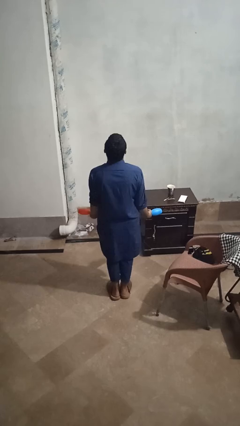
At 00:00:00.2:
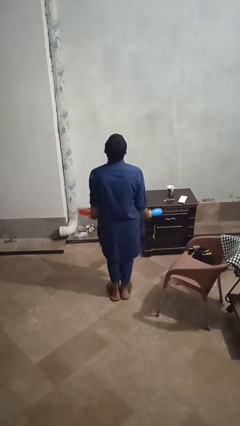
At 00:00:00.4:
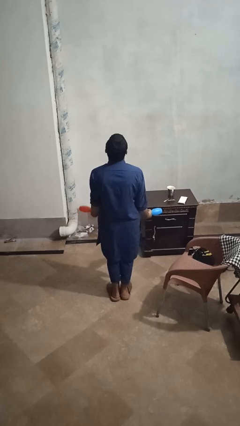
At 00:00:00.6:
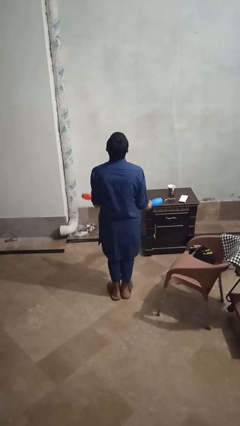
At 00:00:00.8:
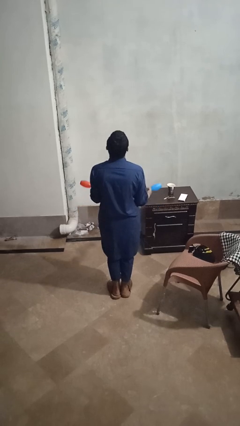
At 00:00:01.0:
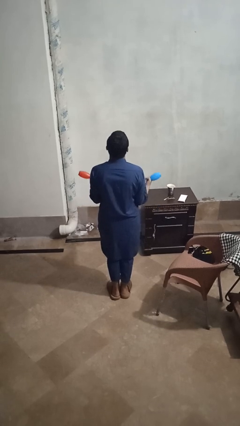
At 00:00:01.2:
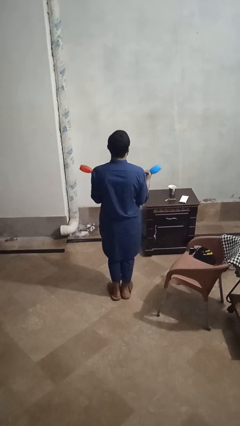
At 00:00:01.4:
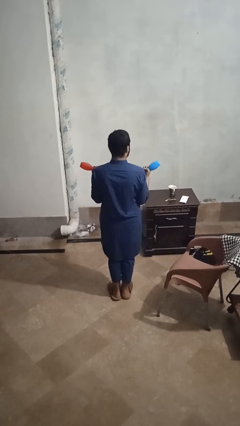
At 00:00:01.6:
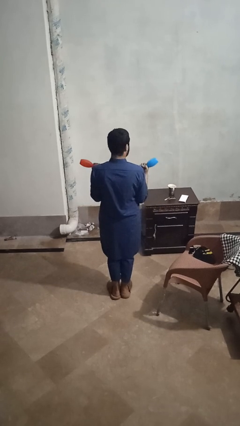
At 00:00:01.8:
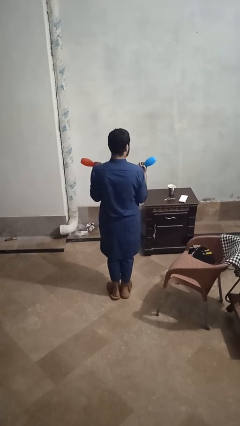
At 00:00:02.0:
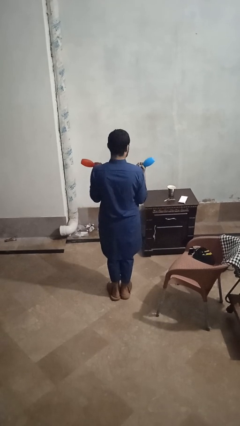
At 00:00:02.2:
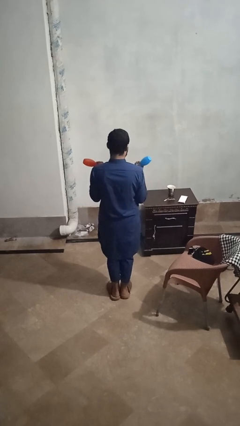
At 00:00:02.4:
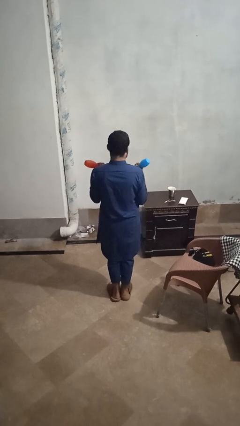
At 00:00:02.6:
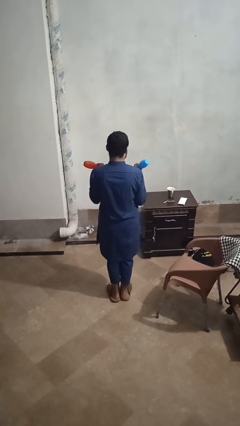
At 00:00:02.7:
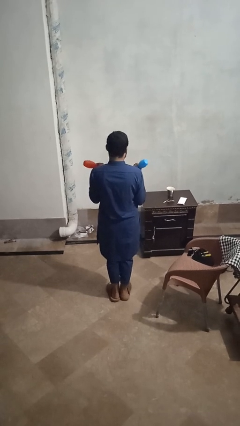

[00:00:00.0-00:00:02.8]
person lifts dumbbells

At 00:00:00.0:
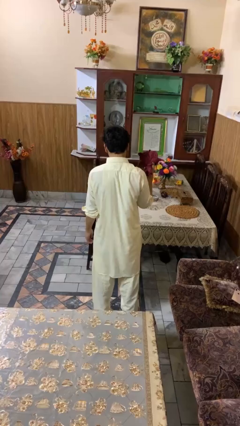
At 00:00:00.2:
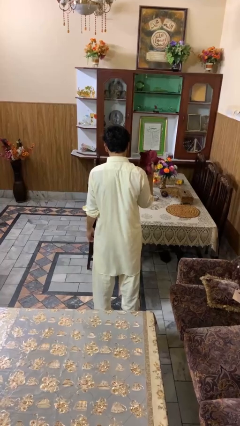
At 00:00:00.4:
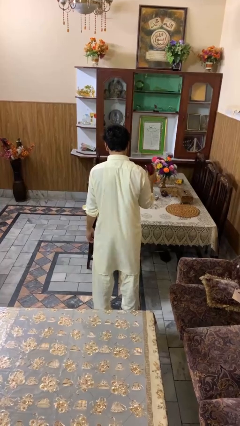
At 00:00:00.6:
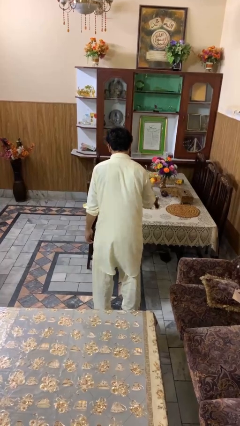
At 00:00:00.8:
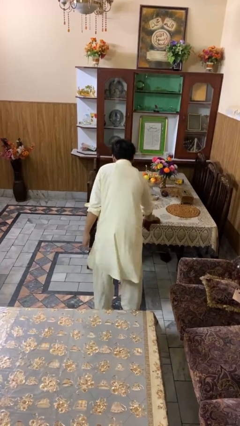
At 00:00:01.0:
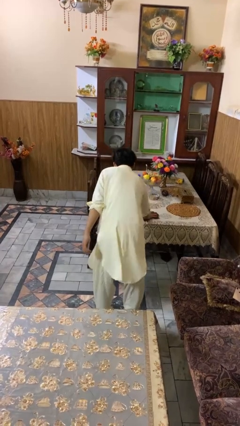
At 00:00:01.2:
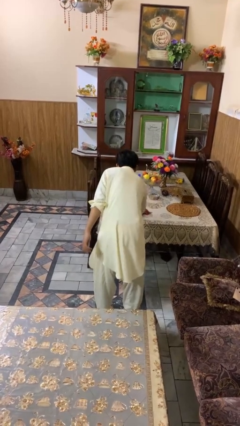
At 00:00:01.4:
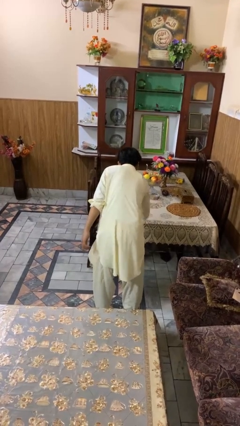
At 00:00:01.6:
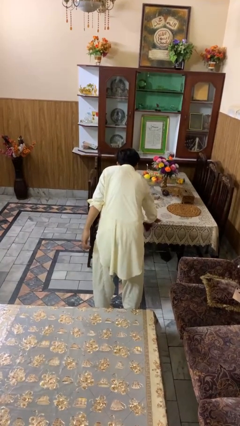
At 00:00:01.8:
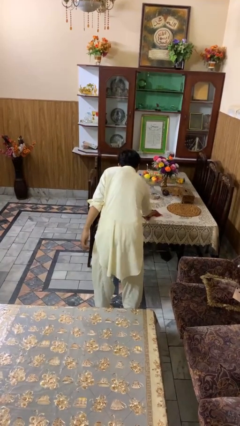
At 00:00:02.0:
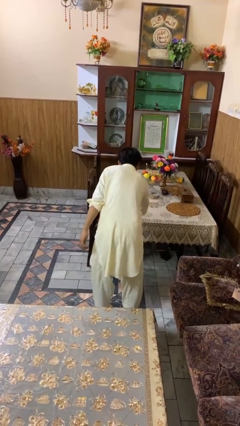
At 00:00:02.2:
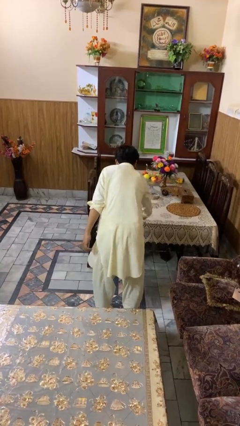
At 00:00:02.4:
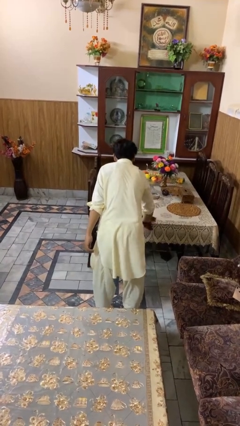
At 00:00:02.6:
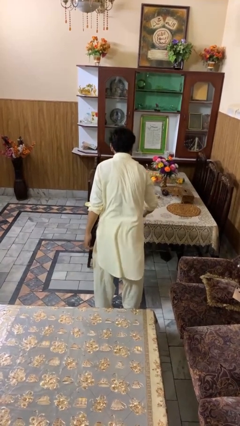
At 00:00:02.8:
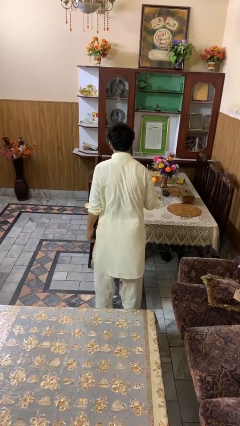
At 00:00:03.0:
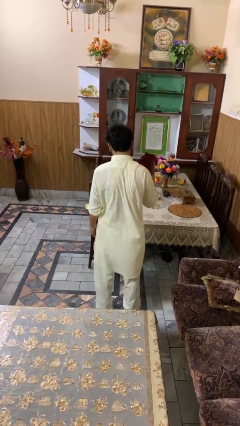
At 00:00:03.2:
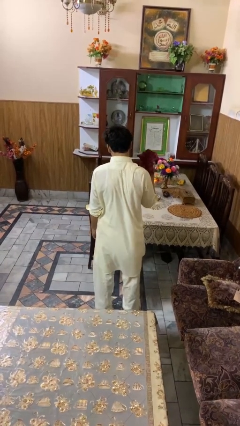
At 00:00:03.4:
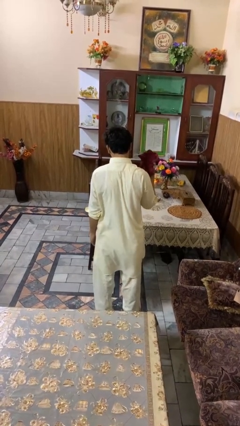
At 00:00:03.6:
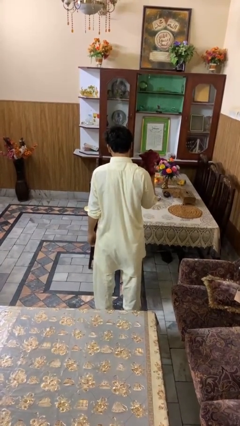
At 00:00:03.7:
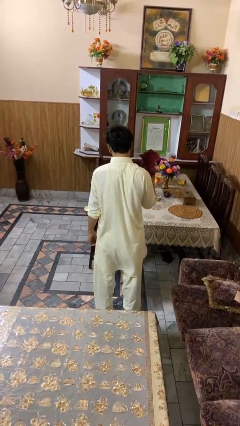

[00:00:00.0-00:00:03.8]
person cleans table with rag

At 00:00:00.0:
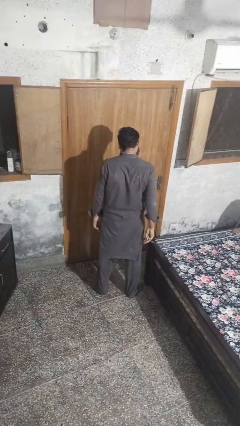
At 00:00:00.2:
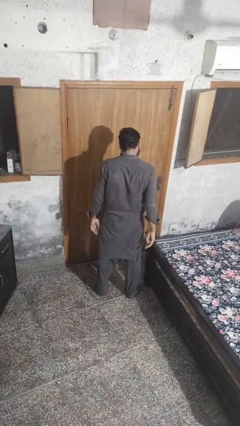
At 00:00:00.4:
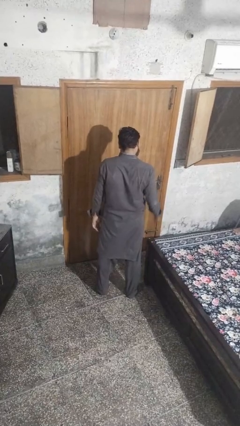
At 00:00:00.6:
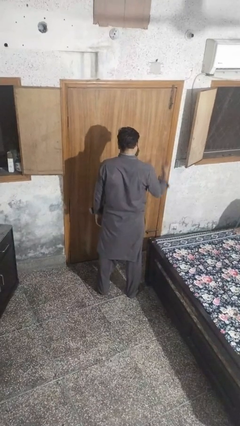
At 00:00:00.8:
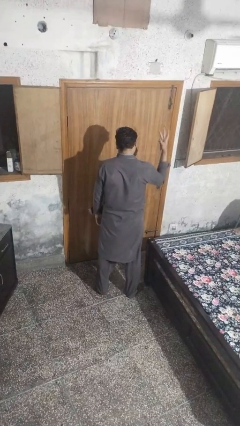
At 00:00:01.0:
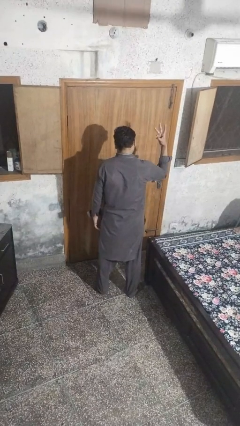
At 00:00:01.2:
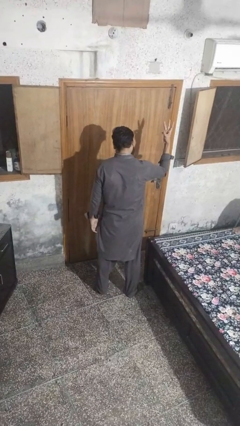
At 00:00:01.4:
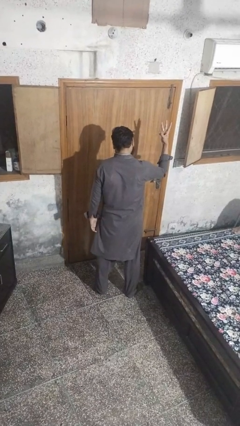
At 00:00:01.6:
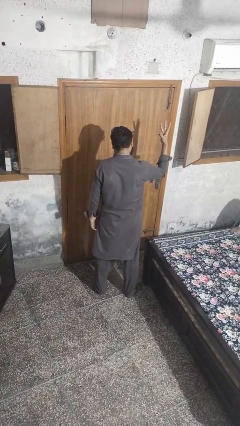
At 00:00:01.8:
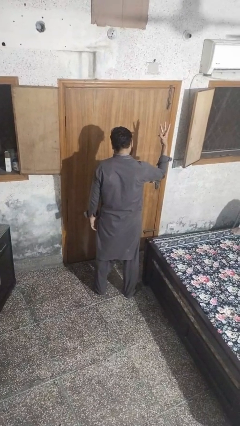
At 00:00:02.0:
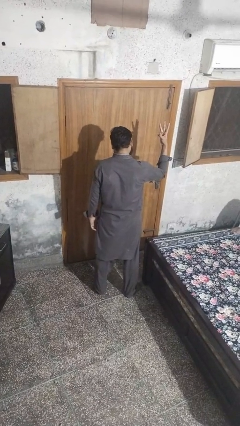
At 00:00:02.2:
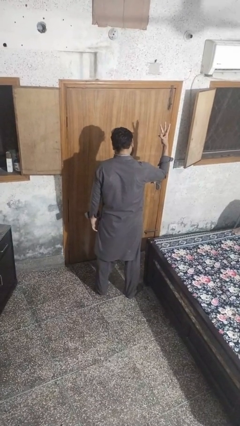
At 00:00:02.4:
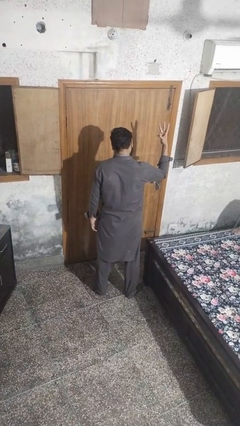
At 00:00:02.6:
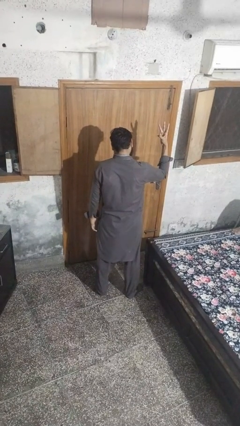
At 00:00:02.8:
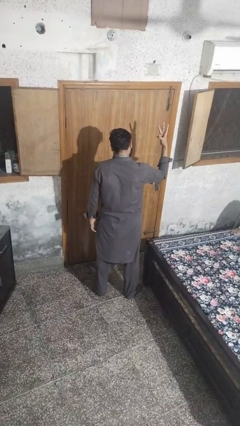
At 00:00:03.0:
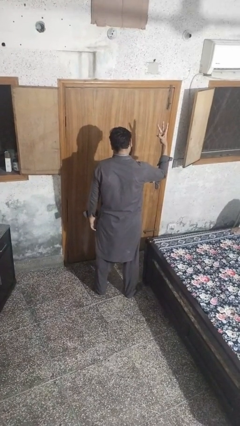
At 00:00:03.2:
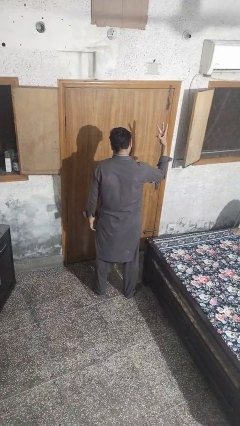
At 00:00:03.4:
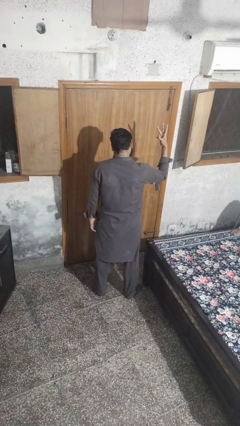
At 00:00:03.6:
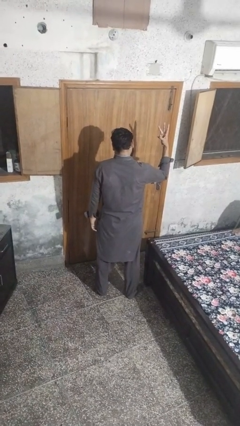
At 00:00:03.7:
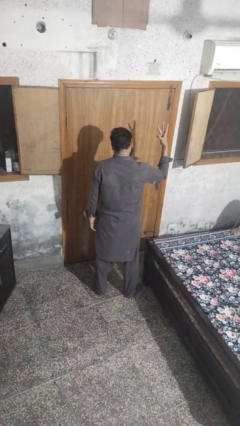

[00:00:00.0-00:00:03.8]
person gestures number three

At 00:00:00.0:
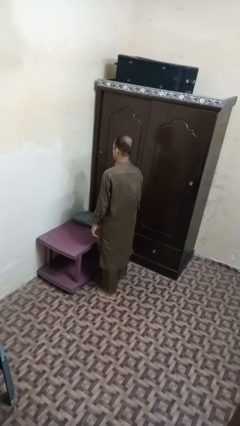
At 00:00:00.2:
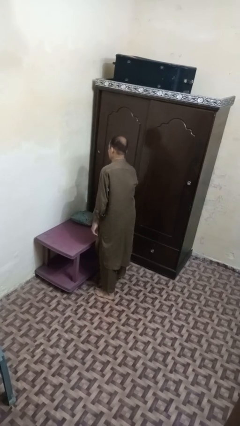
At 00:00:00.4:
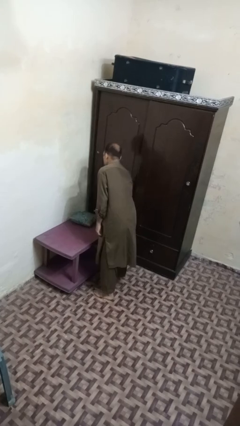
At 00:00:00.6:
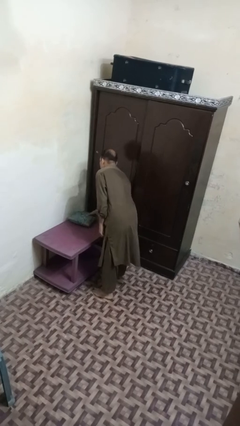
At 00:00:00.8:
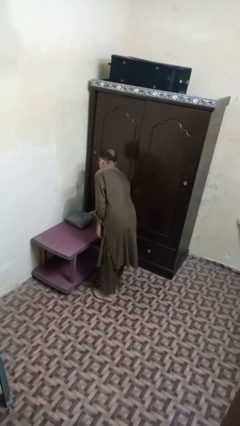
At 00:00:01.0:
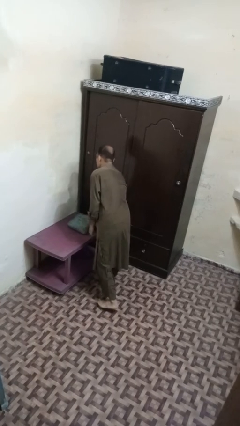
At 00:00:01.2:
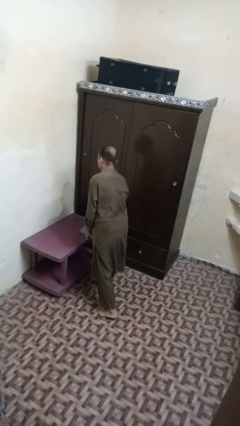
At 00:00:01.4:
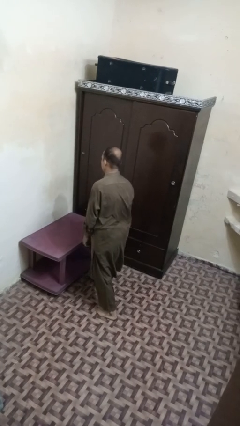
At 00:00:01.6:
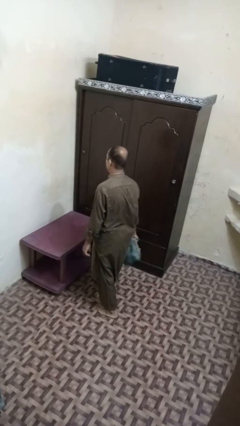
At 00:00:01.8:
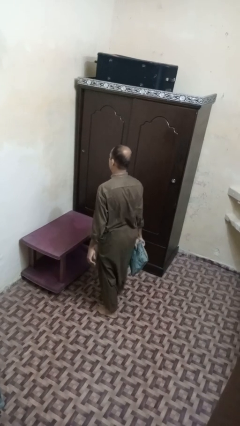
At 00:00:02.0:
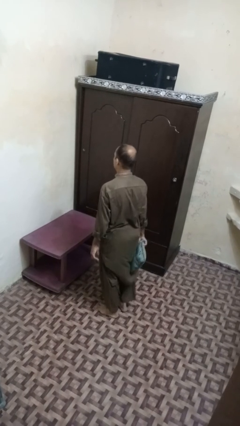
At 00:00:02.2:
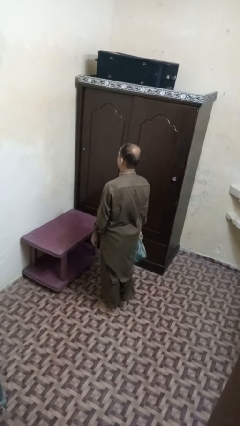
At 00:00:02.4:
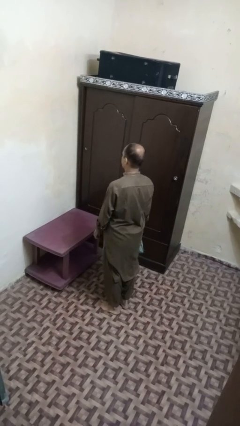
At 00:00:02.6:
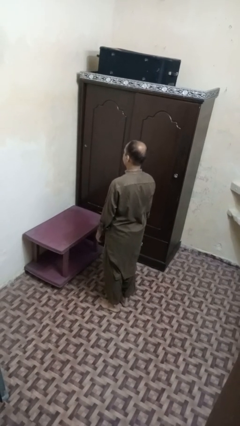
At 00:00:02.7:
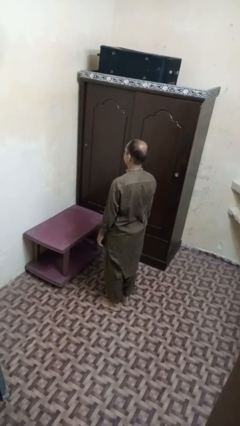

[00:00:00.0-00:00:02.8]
person picks up object from table

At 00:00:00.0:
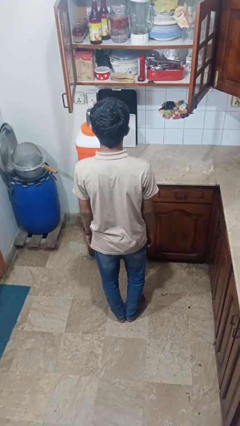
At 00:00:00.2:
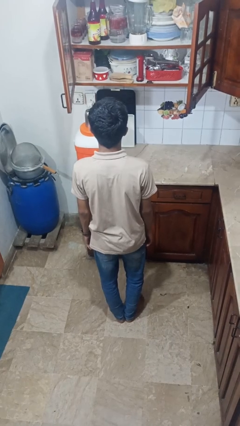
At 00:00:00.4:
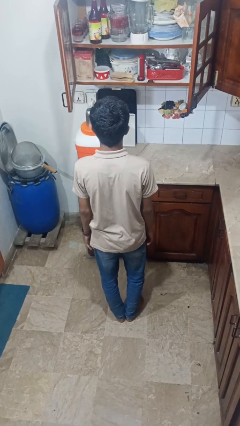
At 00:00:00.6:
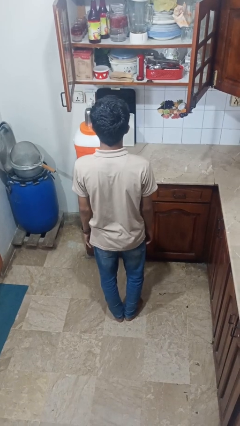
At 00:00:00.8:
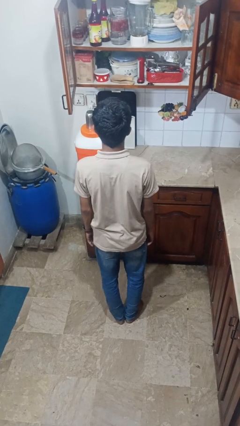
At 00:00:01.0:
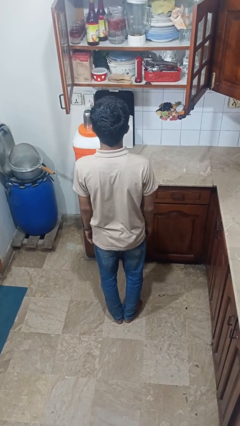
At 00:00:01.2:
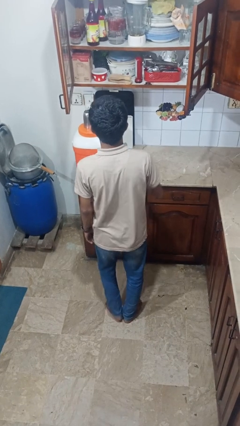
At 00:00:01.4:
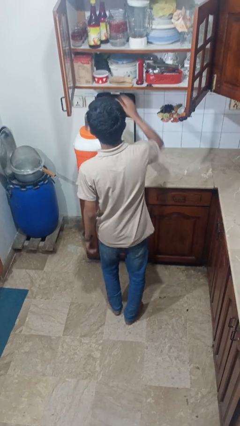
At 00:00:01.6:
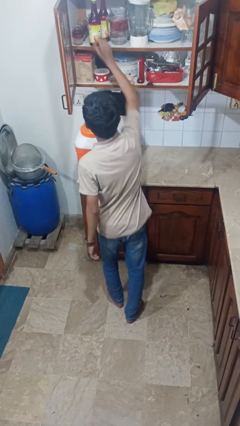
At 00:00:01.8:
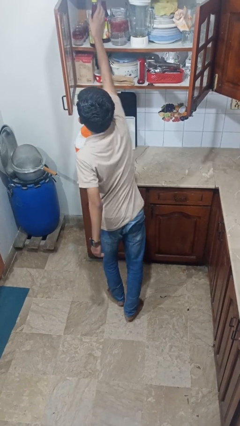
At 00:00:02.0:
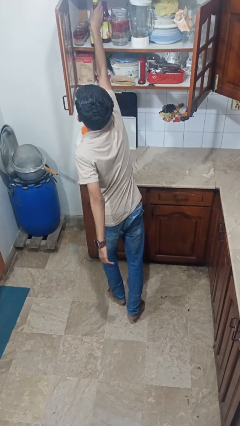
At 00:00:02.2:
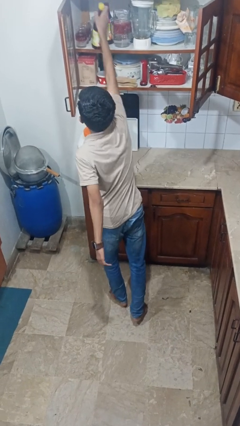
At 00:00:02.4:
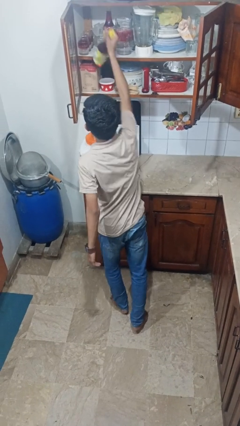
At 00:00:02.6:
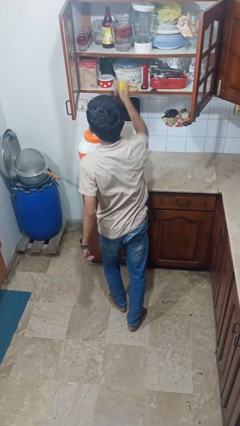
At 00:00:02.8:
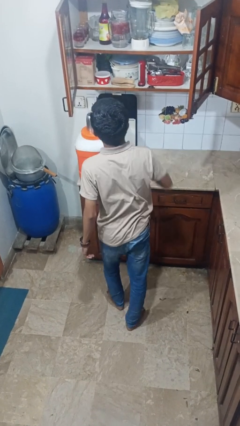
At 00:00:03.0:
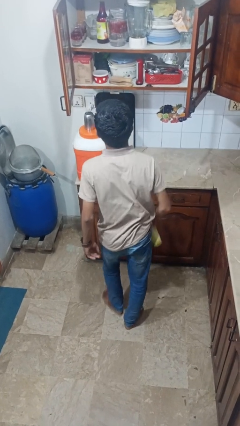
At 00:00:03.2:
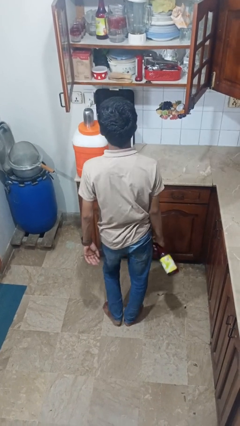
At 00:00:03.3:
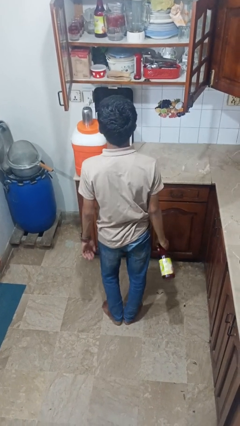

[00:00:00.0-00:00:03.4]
person picks up object from cabinet

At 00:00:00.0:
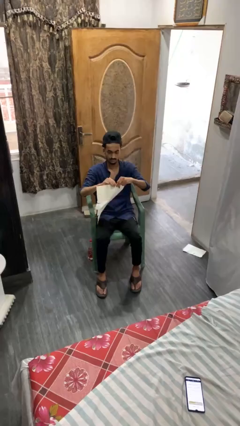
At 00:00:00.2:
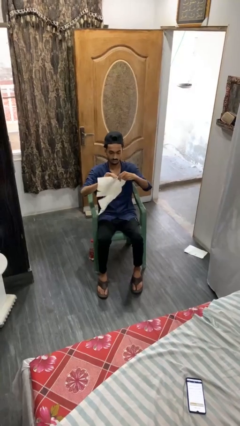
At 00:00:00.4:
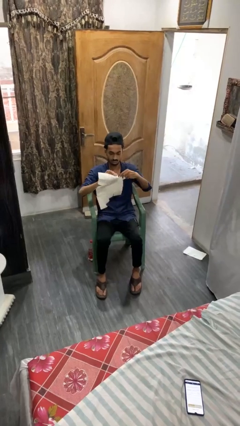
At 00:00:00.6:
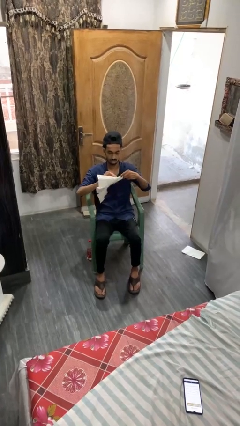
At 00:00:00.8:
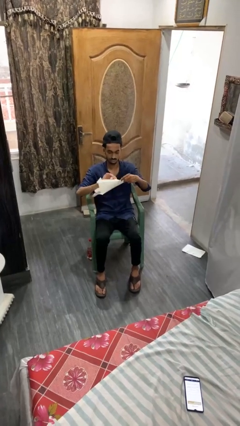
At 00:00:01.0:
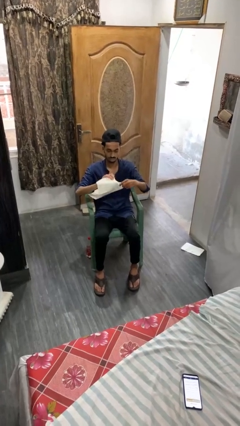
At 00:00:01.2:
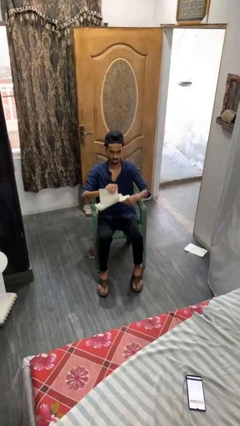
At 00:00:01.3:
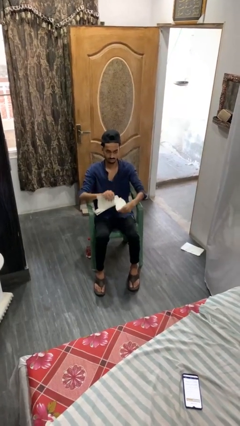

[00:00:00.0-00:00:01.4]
person tears paper
